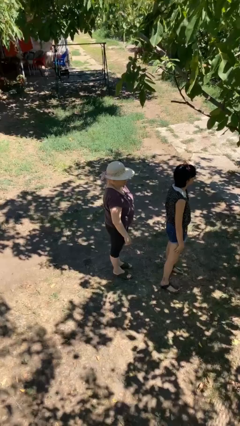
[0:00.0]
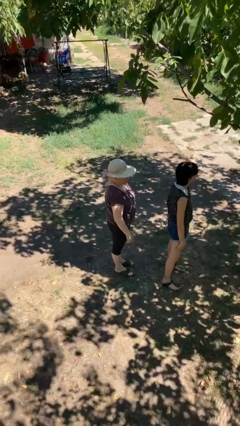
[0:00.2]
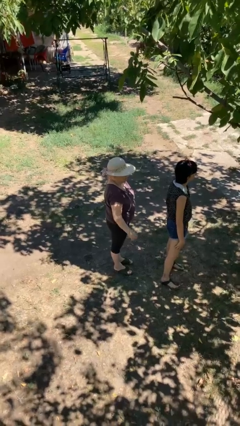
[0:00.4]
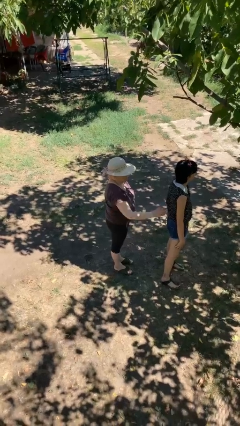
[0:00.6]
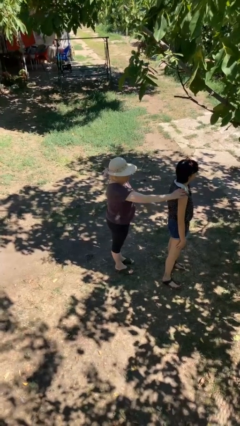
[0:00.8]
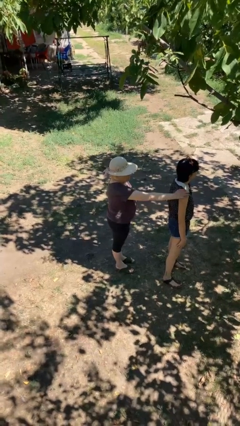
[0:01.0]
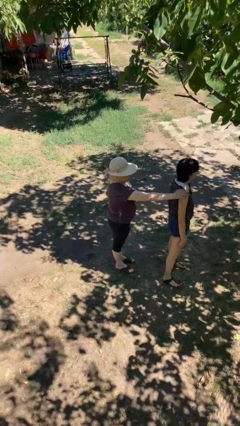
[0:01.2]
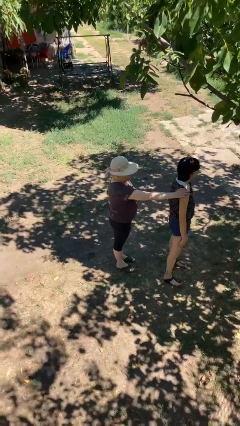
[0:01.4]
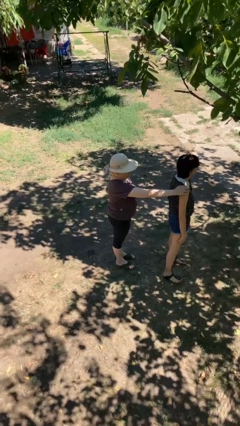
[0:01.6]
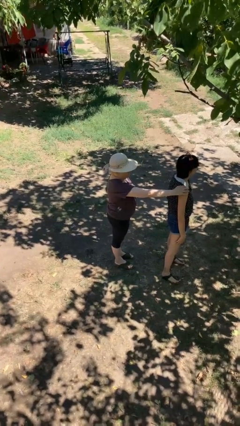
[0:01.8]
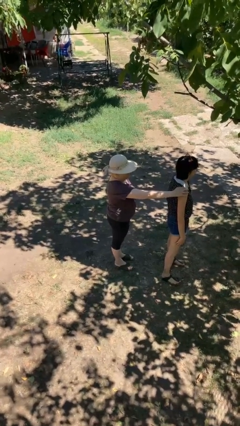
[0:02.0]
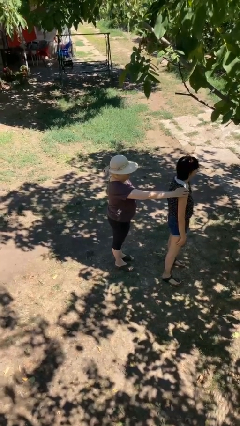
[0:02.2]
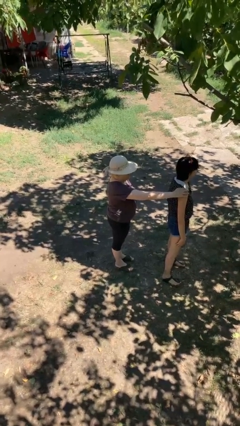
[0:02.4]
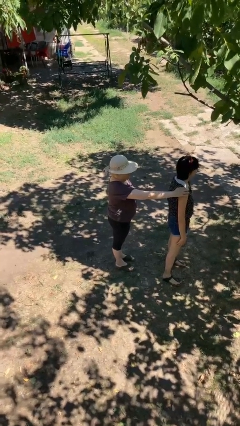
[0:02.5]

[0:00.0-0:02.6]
person grabs person by shoulder

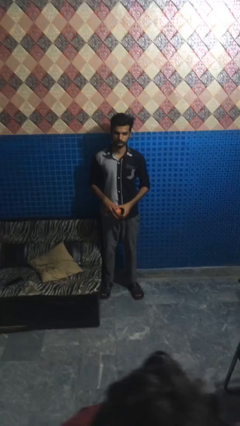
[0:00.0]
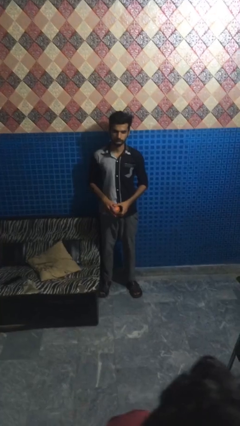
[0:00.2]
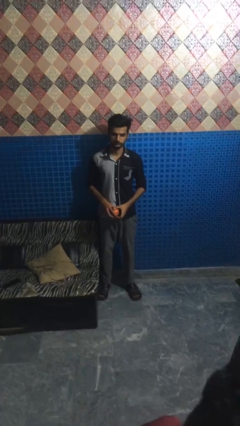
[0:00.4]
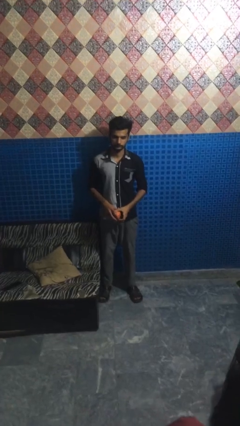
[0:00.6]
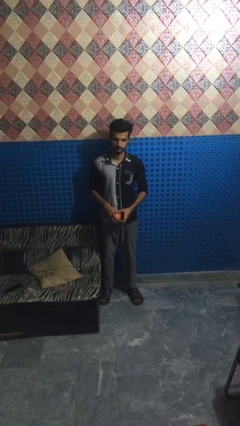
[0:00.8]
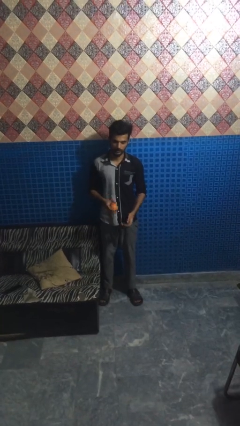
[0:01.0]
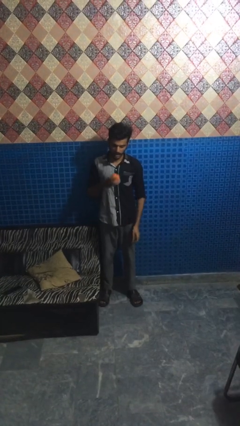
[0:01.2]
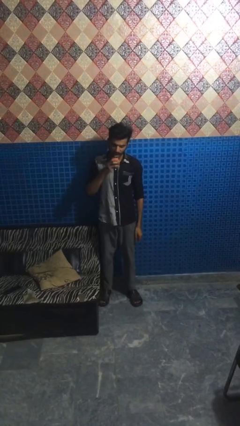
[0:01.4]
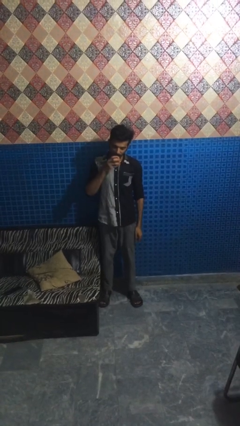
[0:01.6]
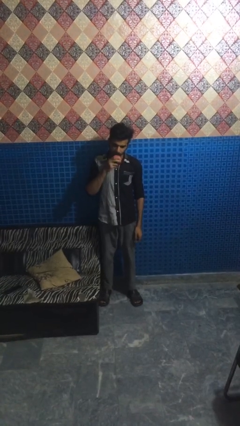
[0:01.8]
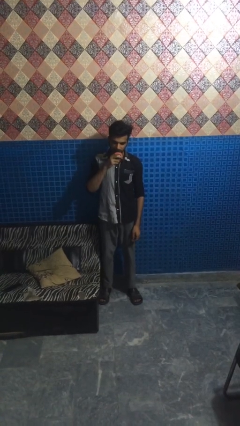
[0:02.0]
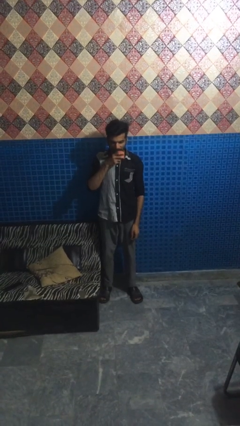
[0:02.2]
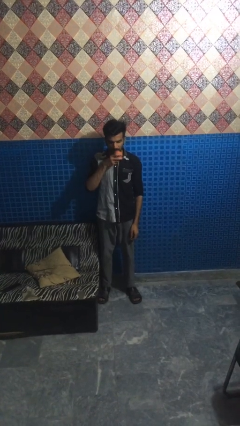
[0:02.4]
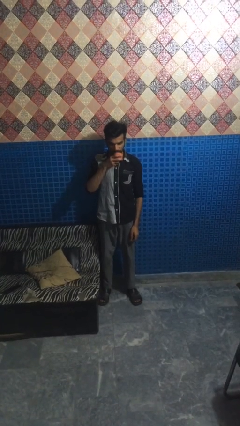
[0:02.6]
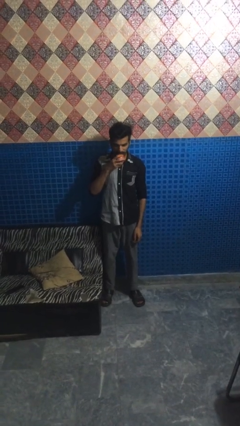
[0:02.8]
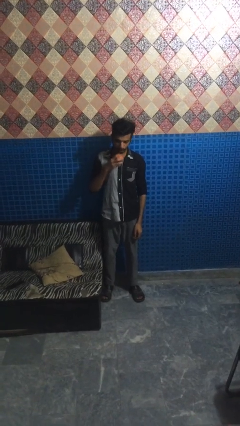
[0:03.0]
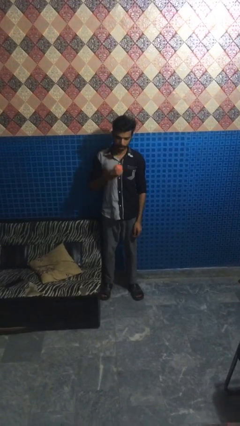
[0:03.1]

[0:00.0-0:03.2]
person eats apple

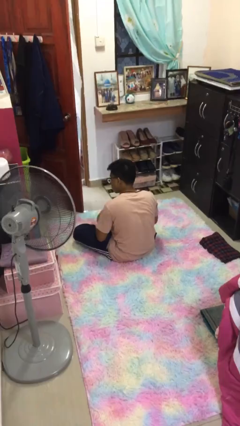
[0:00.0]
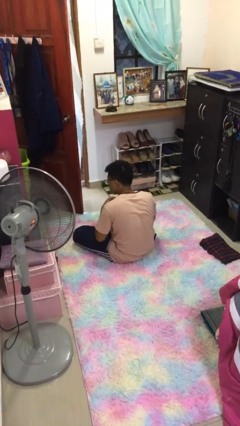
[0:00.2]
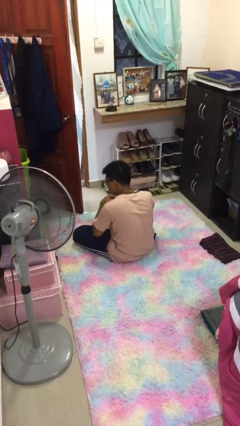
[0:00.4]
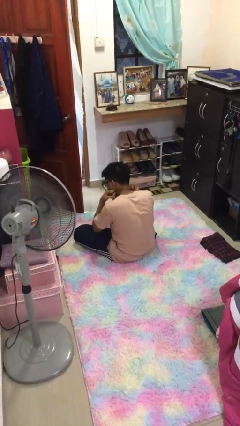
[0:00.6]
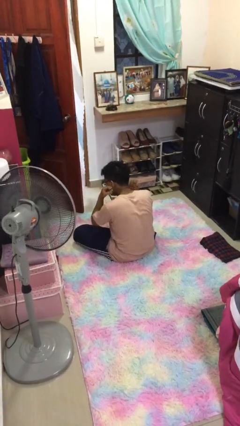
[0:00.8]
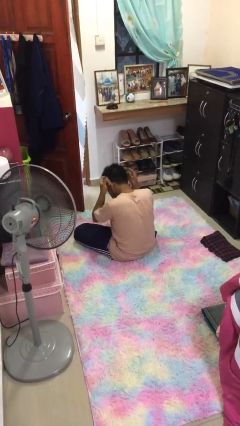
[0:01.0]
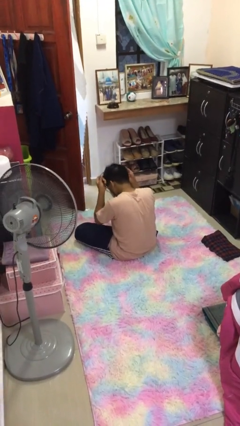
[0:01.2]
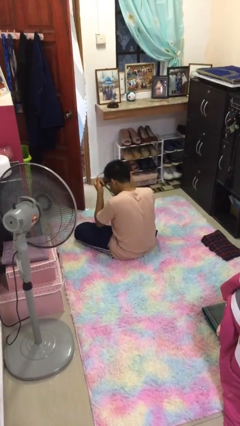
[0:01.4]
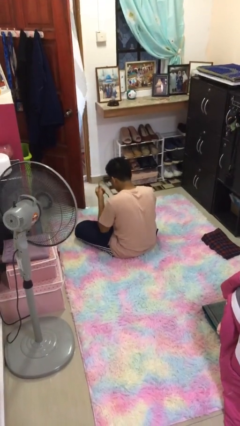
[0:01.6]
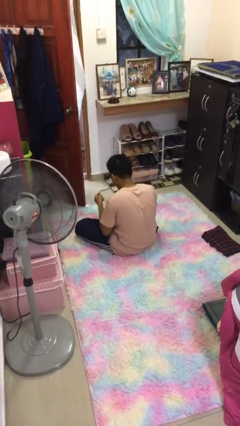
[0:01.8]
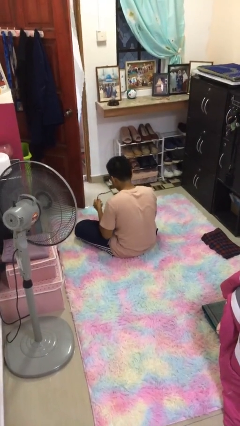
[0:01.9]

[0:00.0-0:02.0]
person takes off necklace

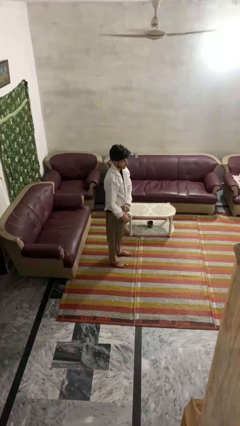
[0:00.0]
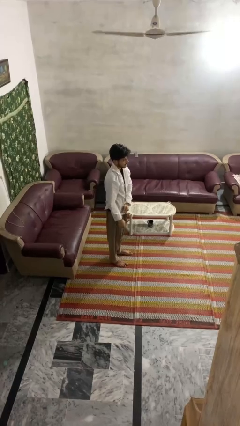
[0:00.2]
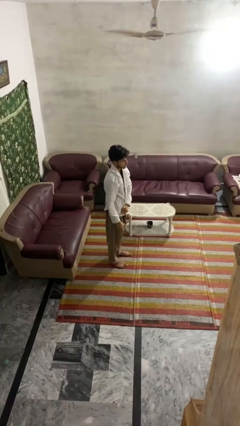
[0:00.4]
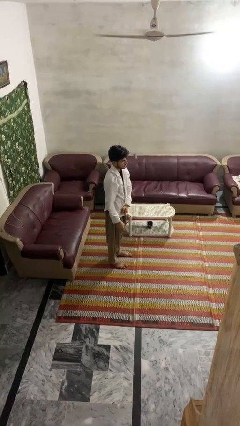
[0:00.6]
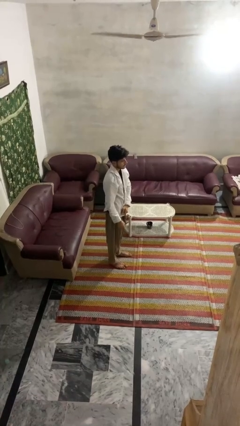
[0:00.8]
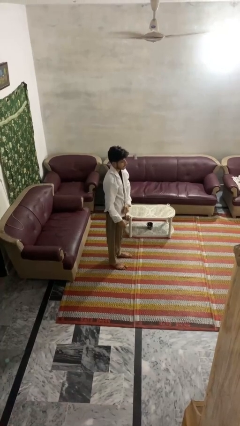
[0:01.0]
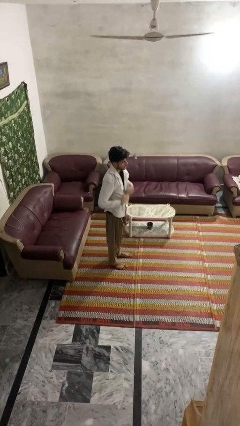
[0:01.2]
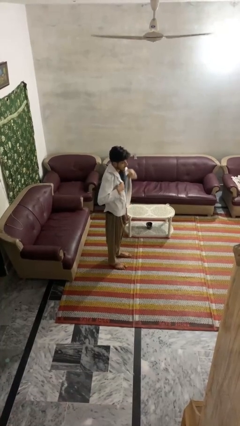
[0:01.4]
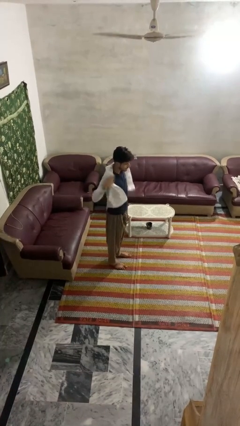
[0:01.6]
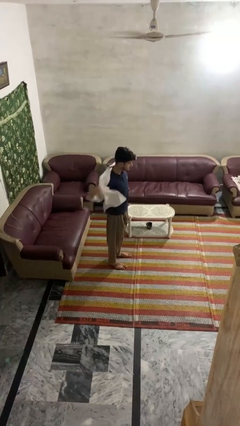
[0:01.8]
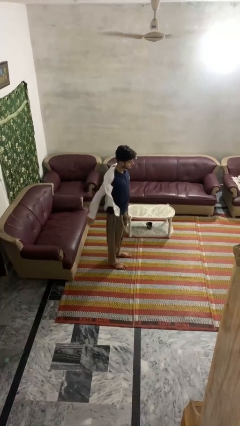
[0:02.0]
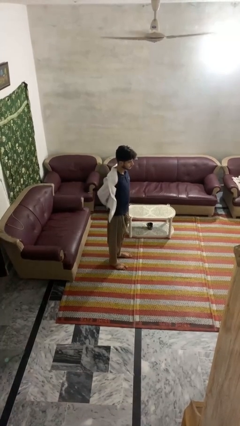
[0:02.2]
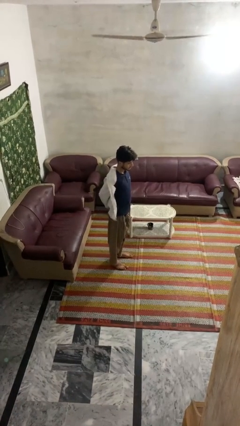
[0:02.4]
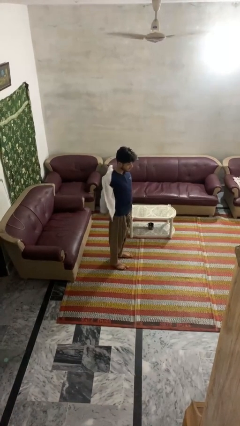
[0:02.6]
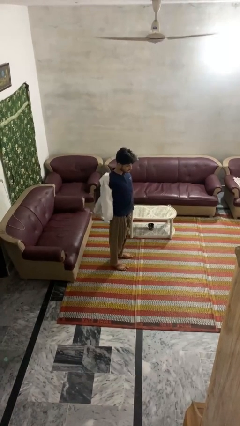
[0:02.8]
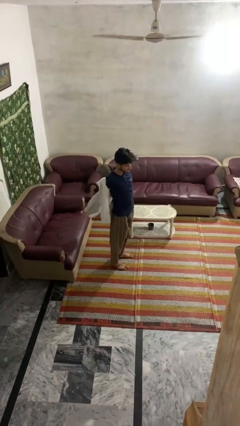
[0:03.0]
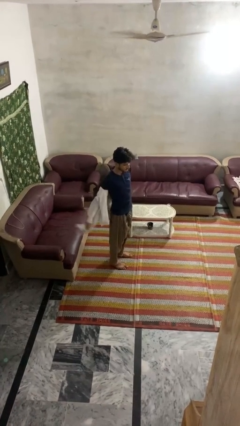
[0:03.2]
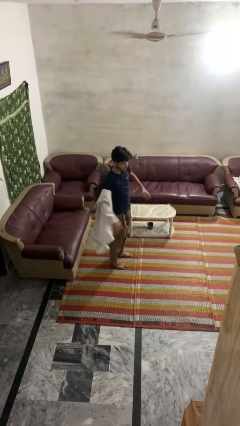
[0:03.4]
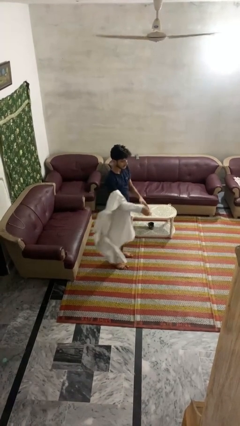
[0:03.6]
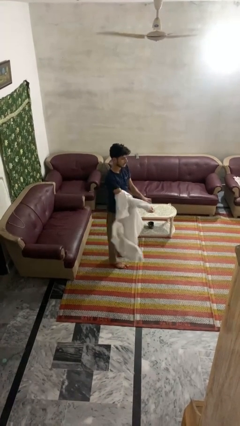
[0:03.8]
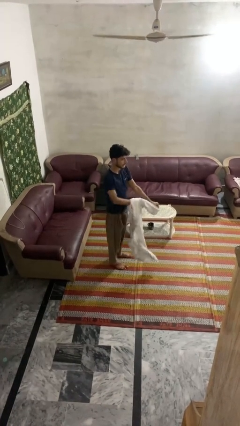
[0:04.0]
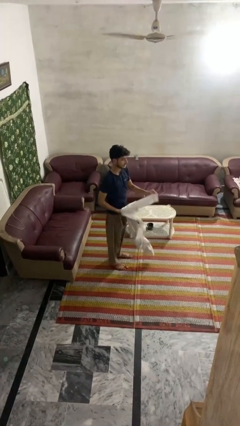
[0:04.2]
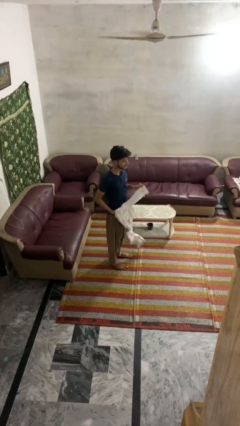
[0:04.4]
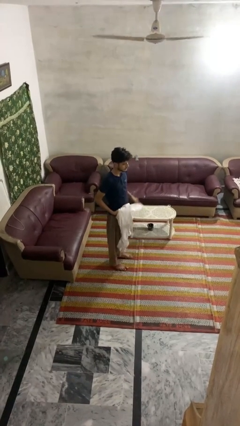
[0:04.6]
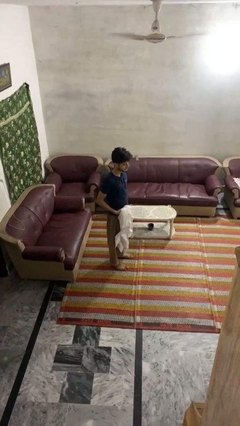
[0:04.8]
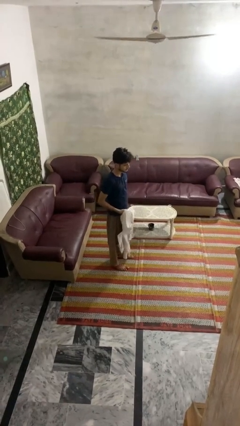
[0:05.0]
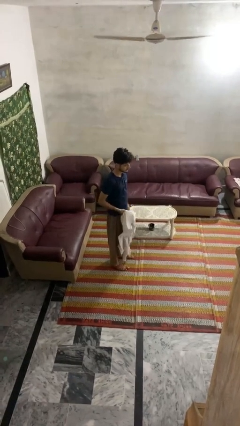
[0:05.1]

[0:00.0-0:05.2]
person takes off shirt

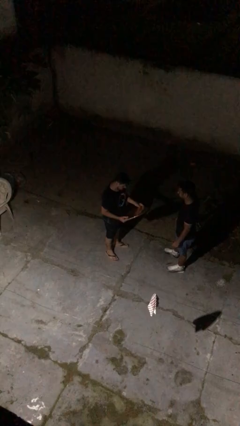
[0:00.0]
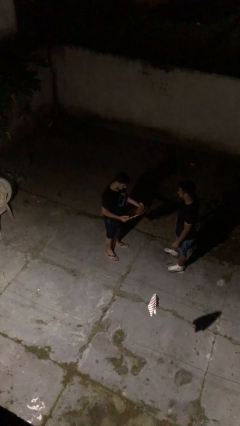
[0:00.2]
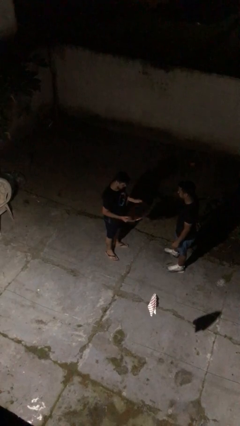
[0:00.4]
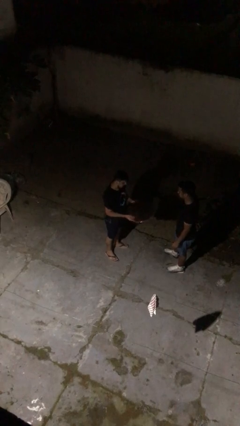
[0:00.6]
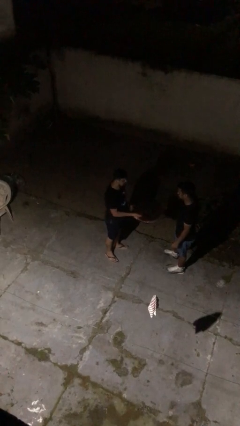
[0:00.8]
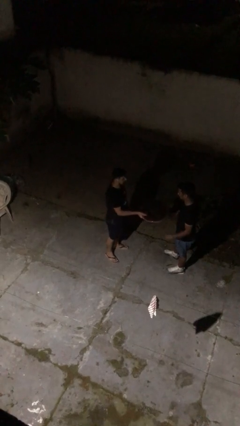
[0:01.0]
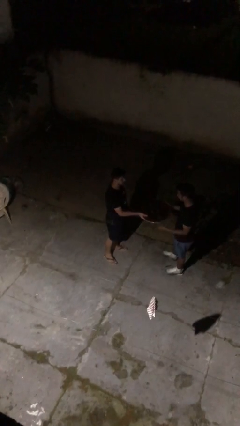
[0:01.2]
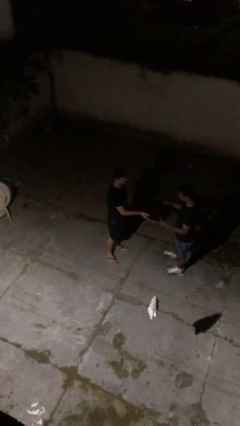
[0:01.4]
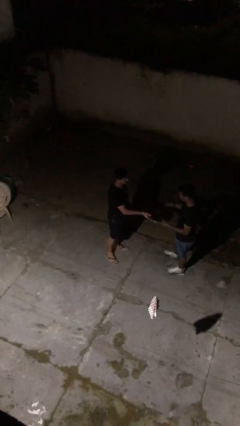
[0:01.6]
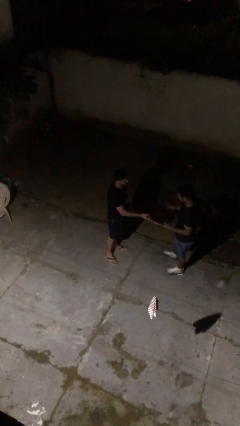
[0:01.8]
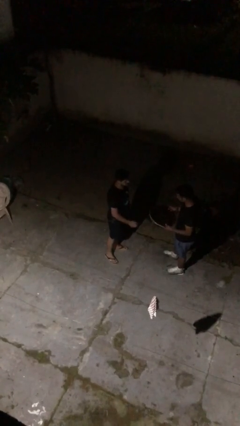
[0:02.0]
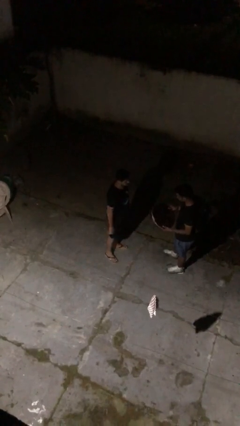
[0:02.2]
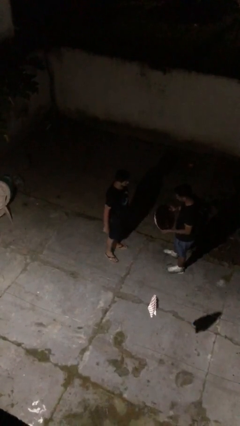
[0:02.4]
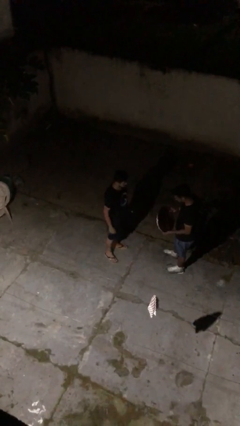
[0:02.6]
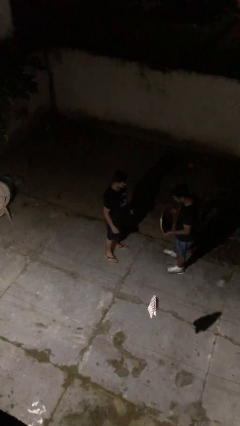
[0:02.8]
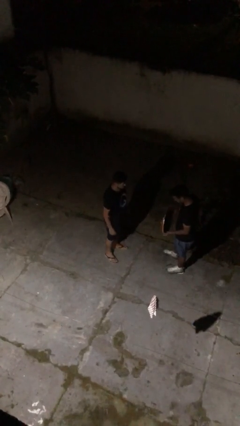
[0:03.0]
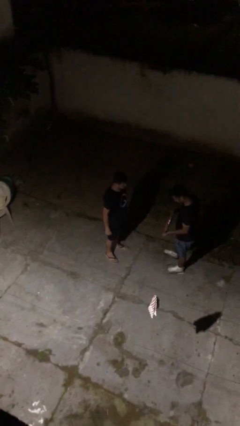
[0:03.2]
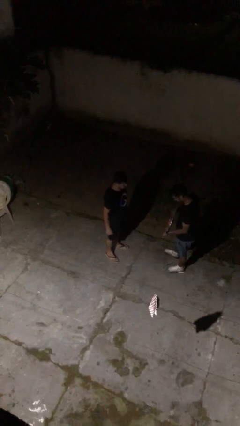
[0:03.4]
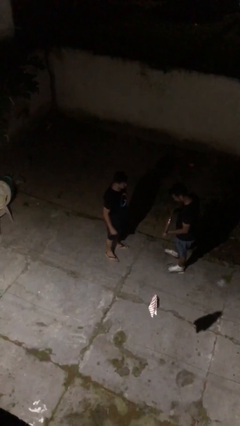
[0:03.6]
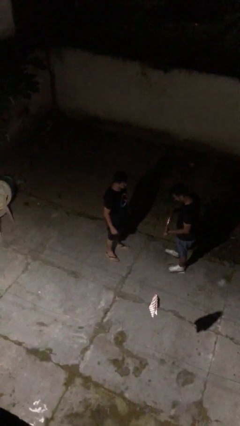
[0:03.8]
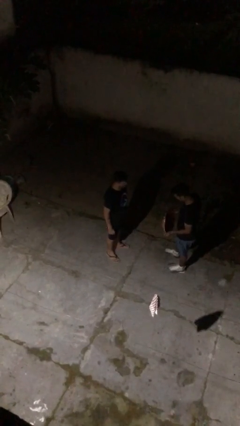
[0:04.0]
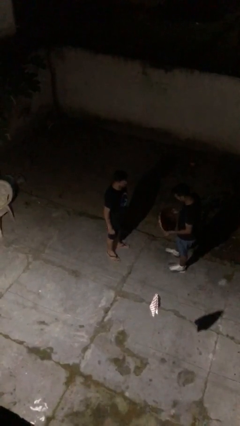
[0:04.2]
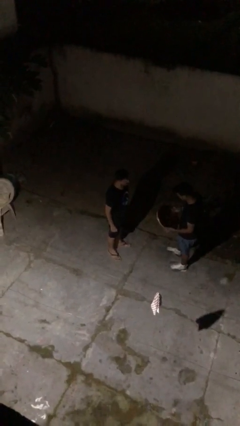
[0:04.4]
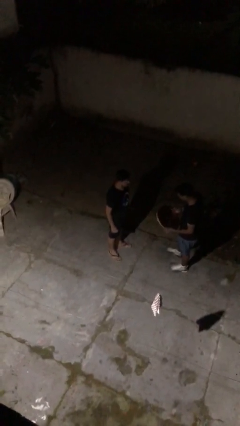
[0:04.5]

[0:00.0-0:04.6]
person transfers object to person
